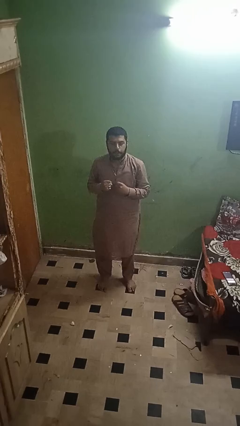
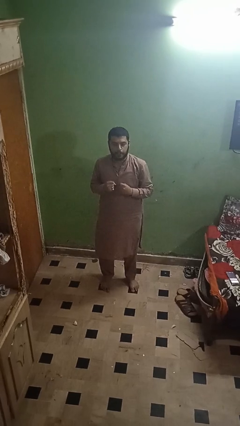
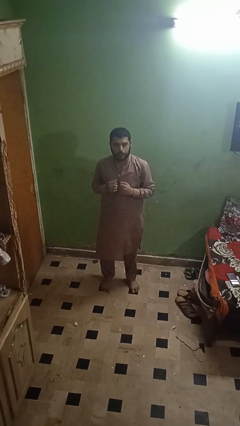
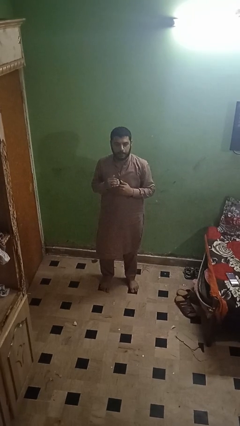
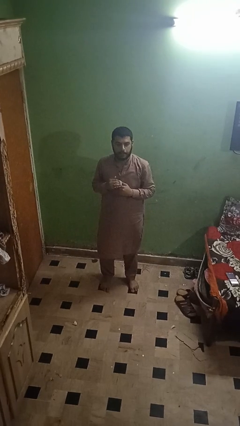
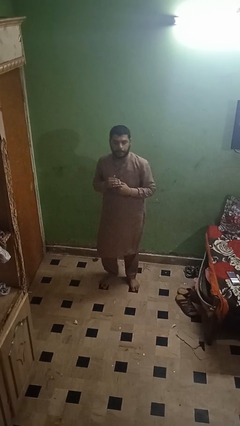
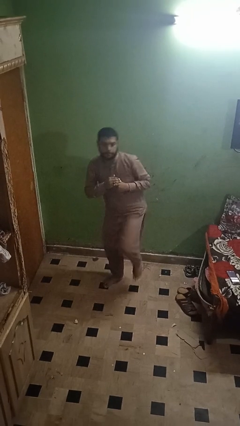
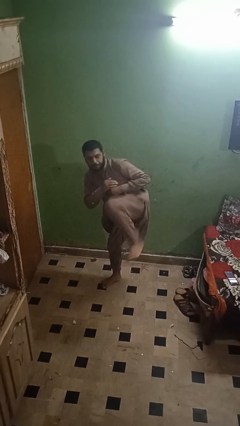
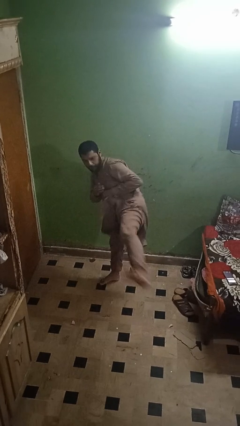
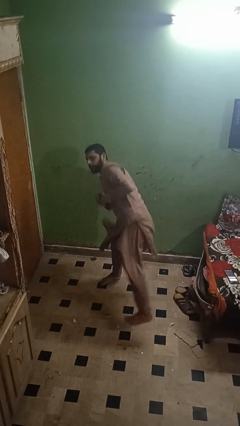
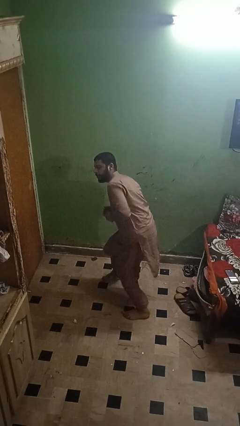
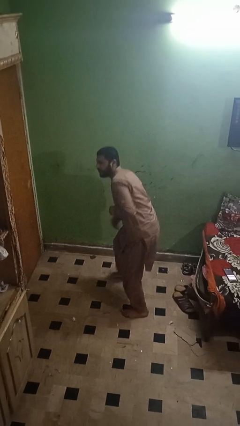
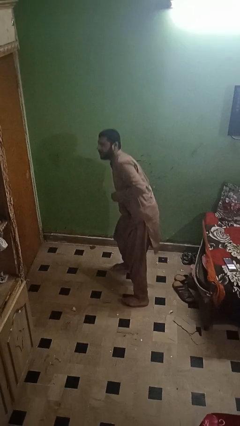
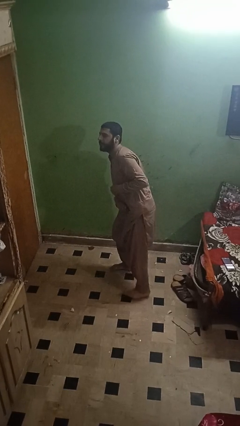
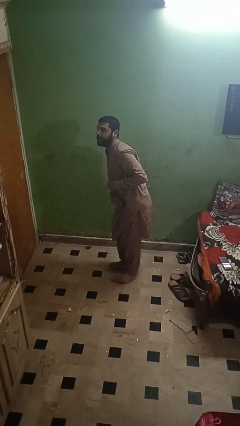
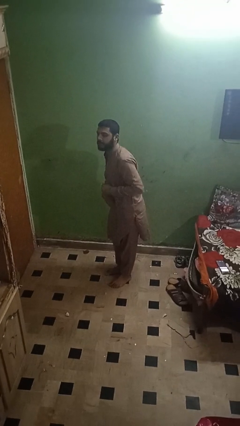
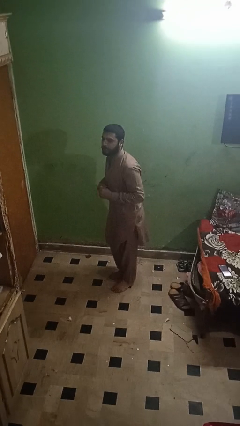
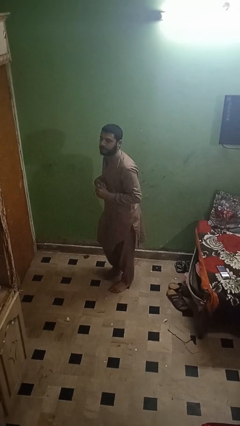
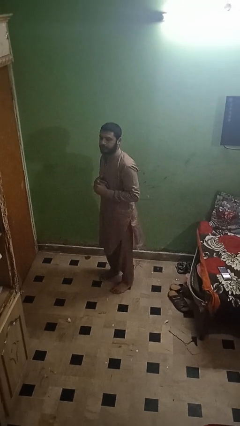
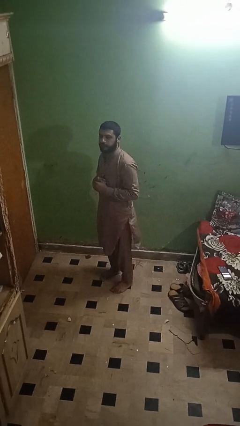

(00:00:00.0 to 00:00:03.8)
person karate kicks

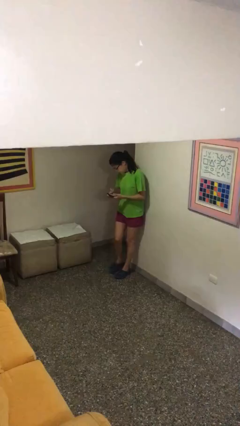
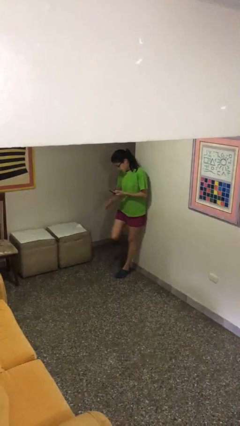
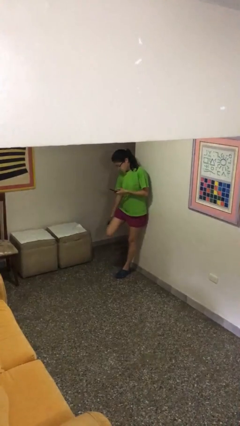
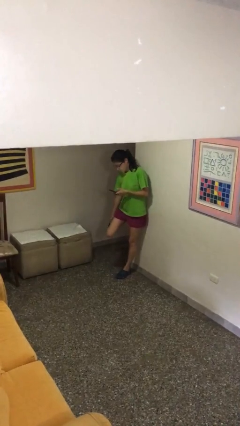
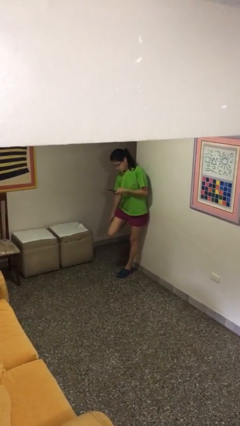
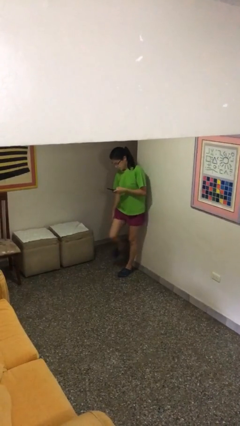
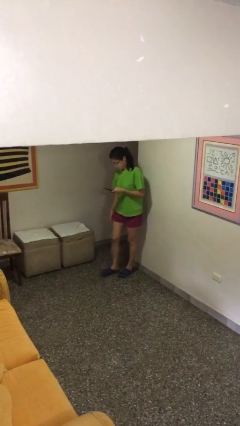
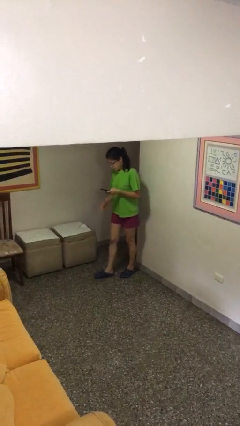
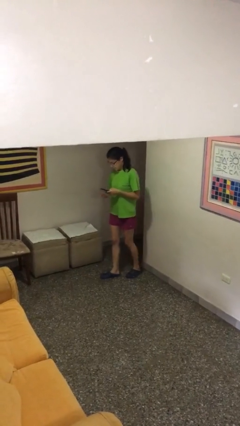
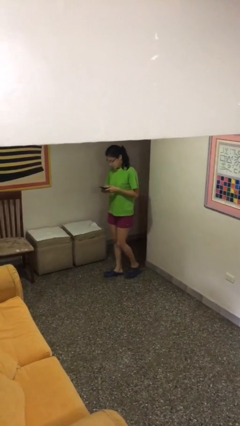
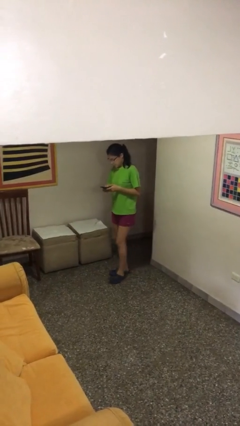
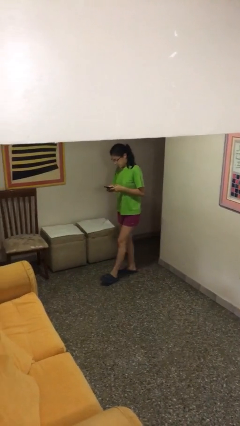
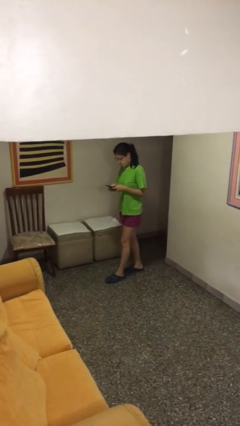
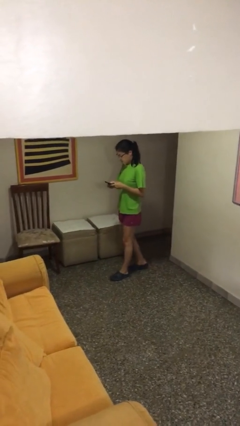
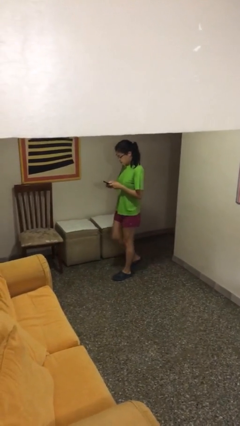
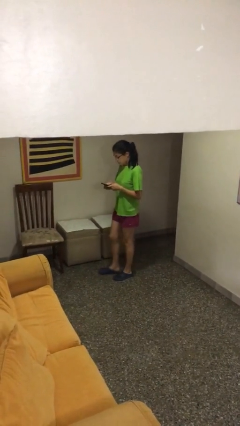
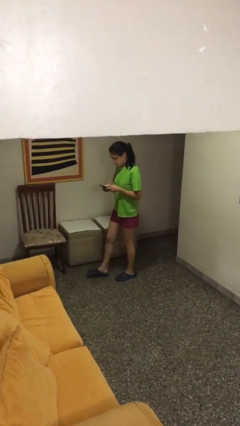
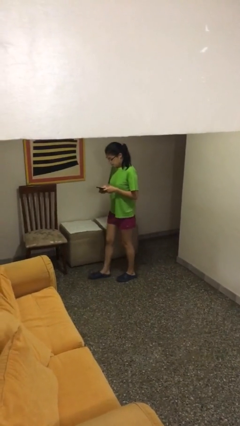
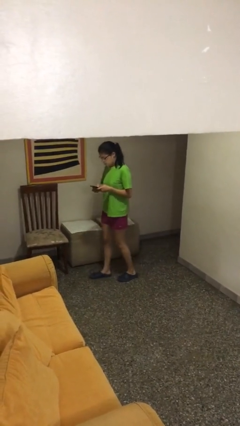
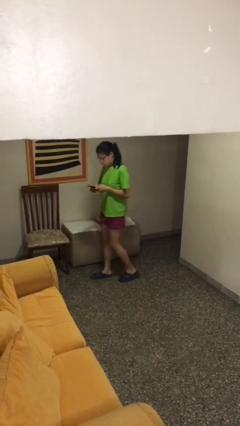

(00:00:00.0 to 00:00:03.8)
person texts on phone

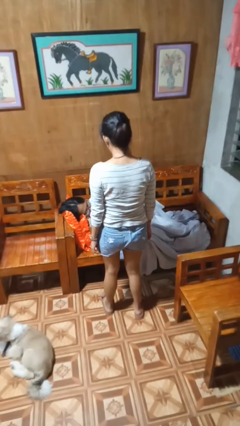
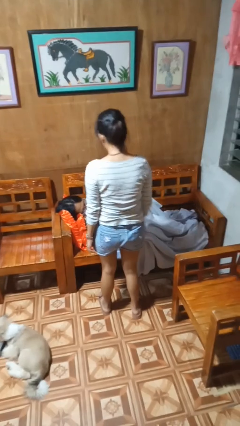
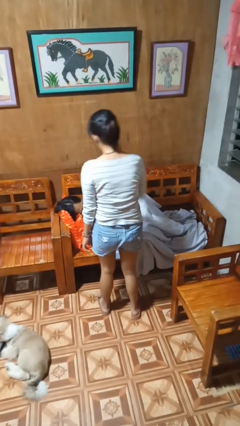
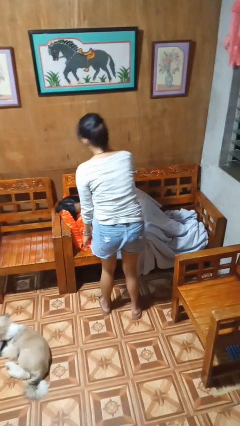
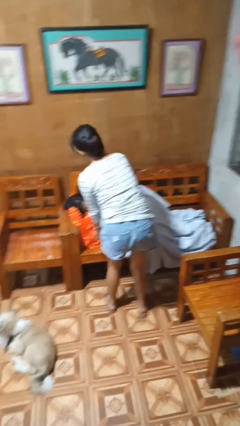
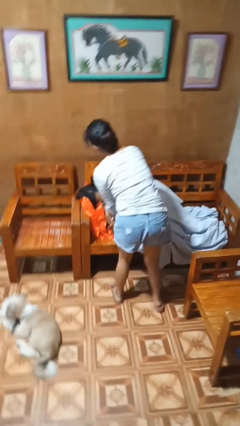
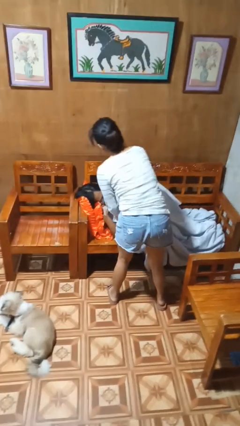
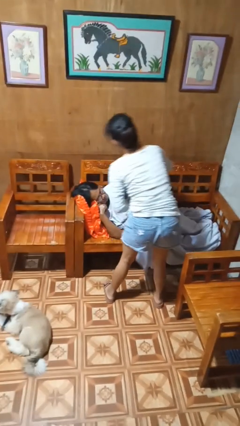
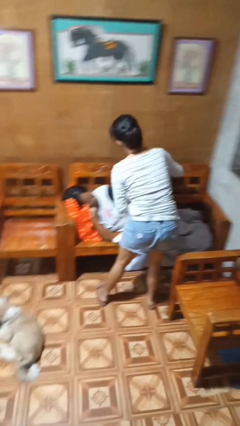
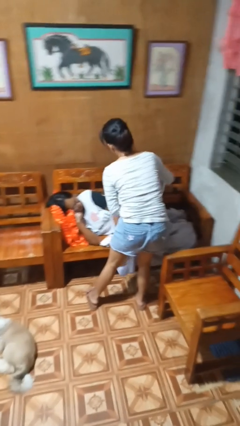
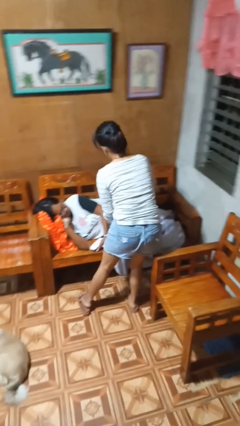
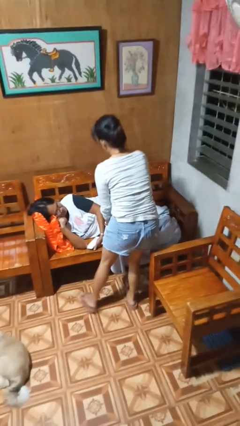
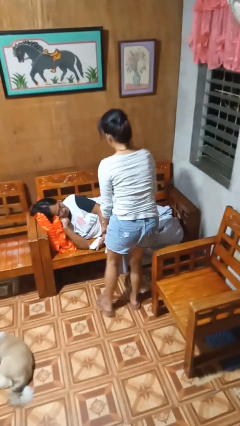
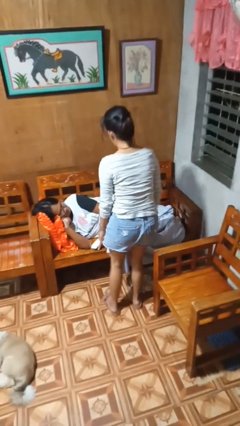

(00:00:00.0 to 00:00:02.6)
person uncovers friend with blanket

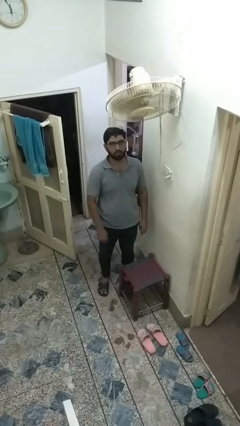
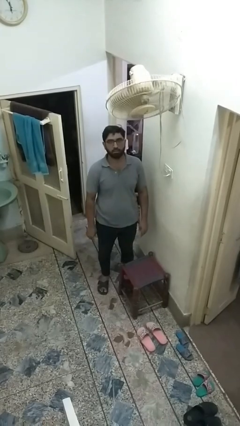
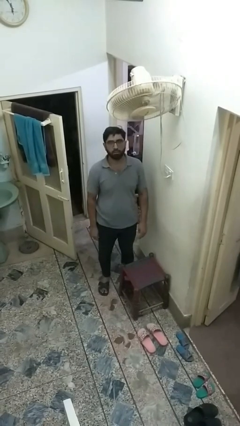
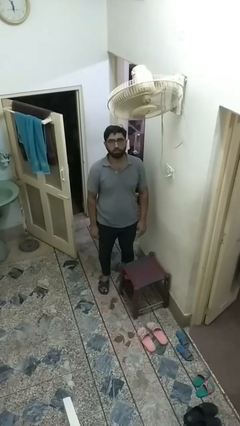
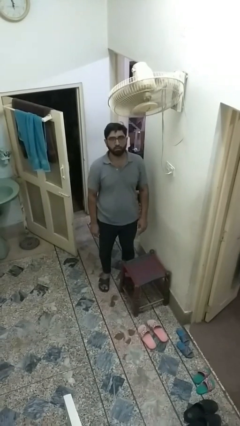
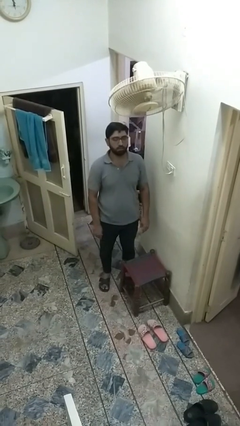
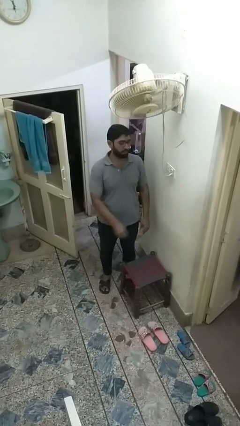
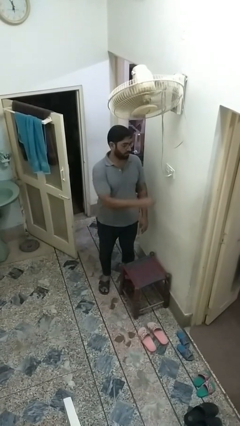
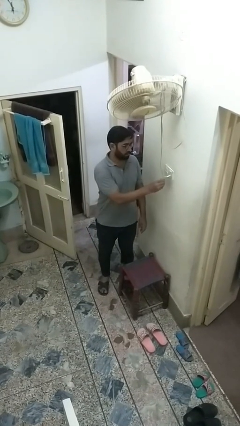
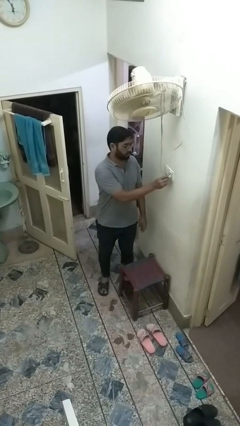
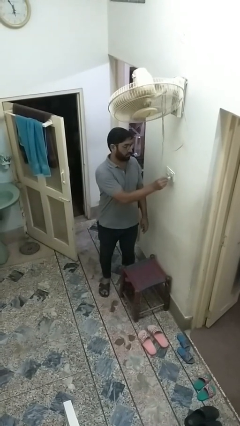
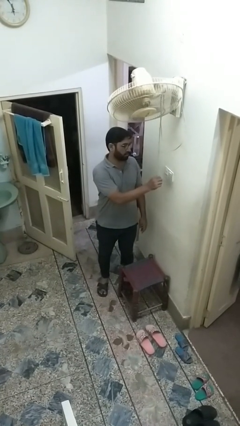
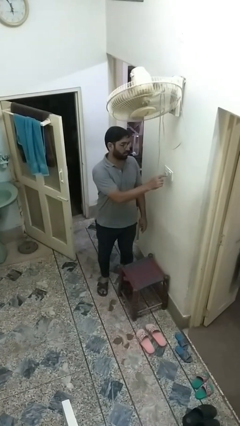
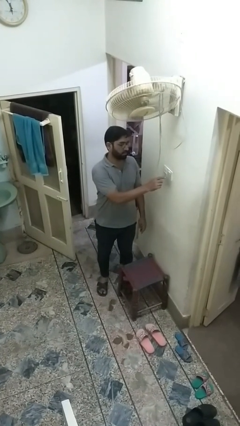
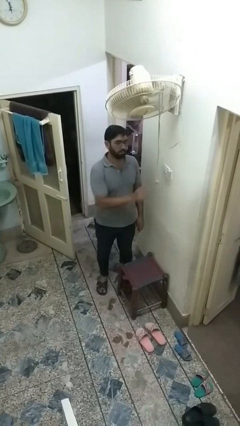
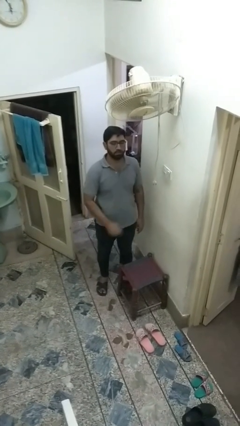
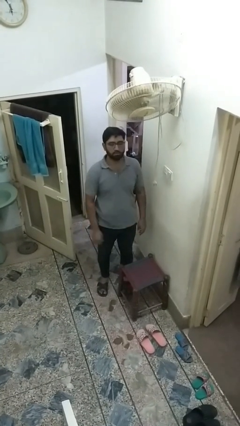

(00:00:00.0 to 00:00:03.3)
person unplugs from electrical socket

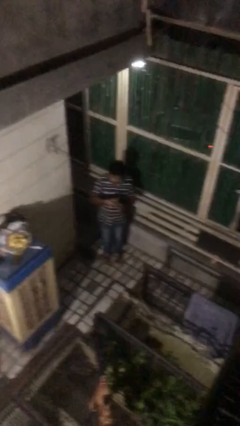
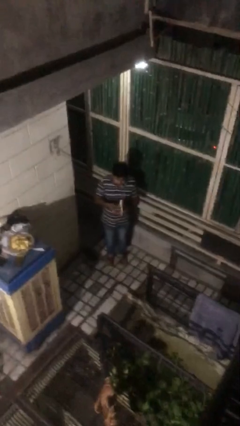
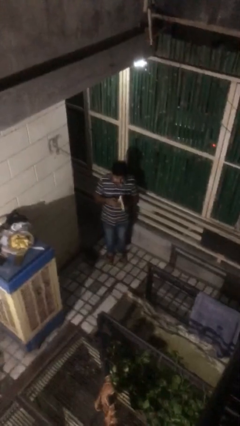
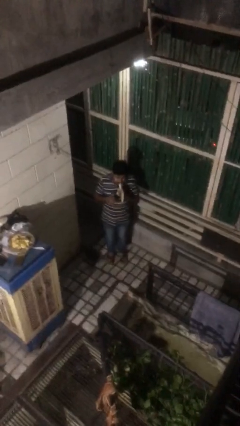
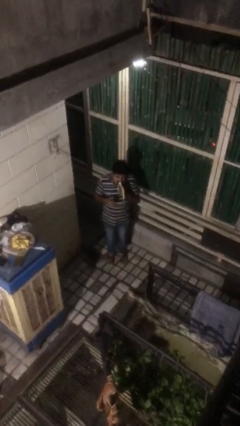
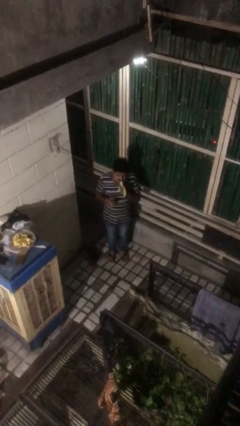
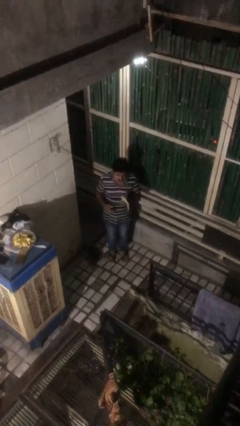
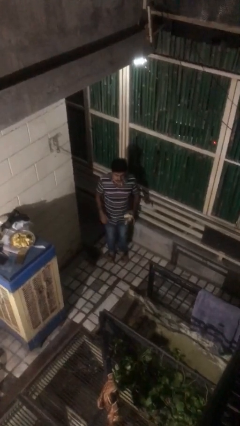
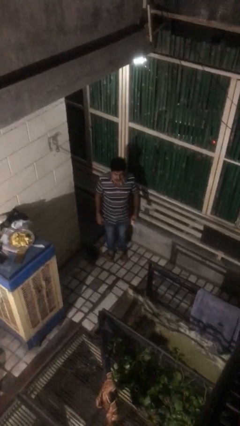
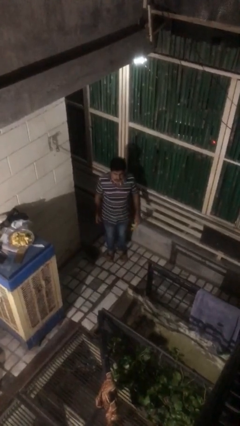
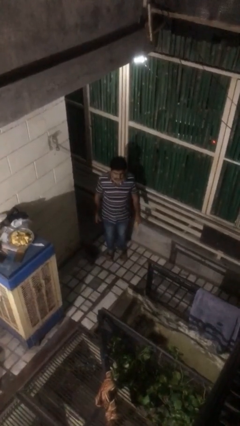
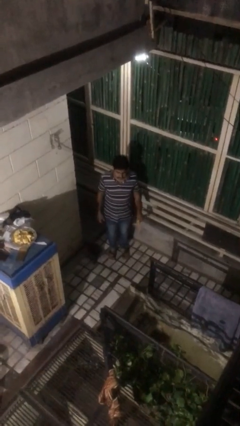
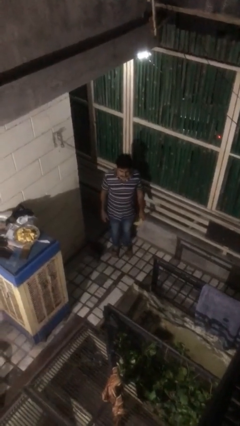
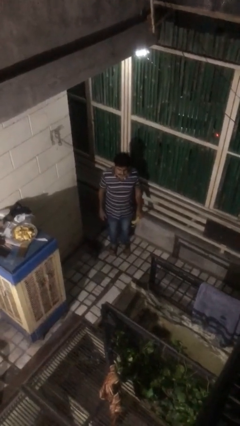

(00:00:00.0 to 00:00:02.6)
person eats banana

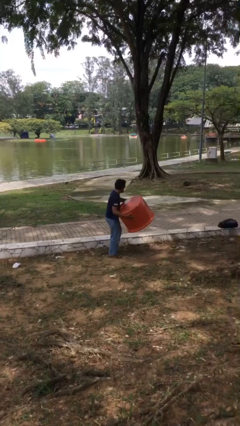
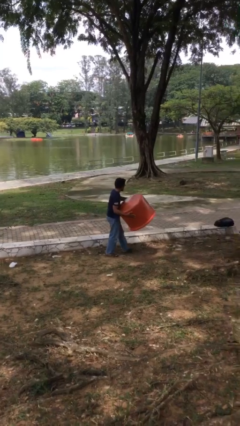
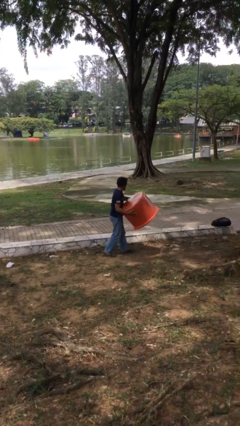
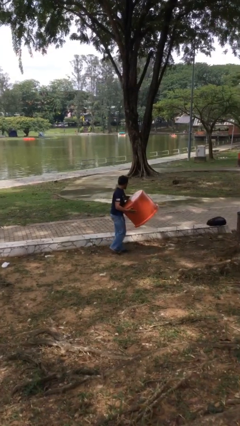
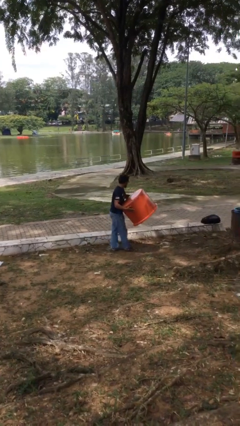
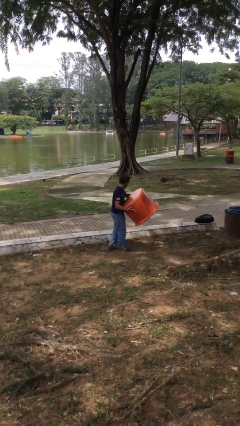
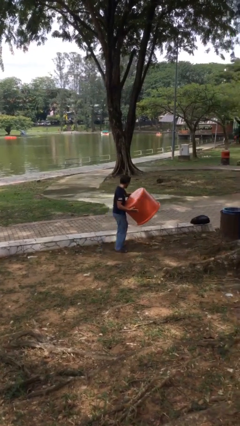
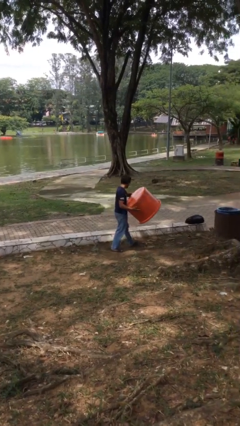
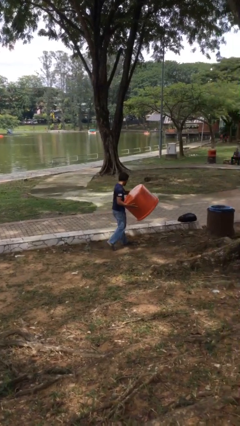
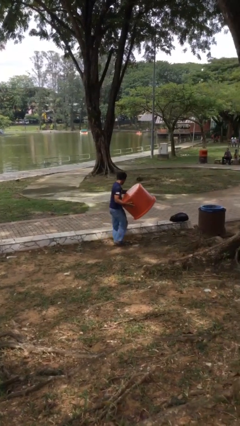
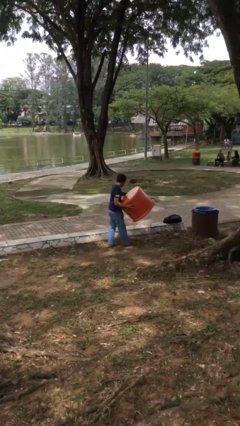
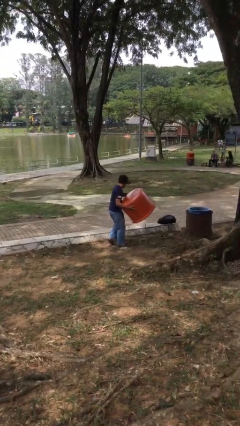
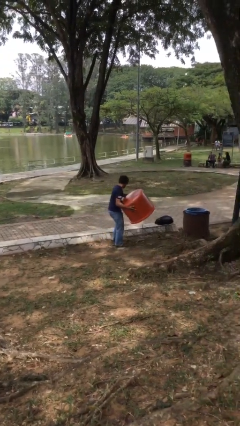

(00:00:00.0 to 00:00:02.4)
person carries heavy object
